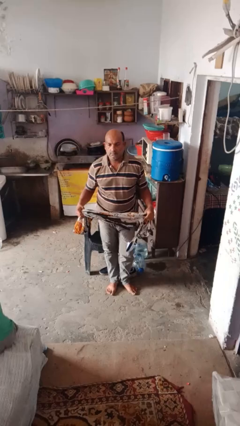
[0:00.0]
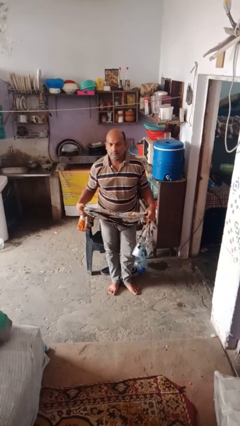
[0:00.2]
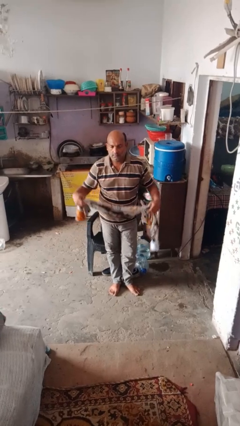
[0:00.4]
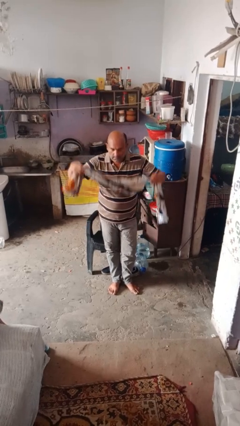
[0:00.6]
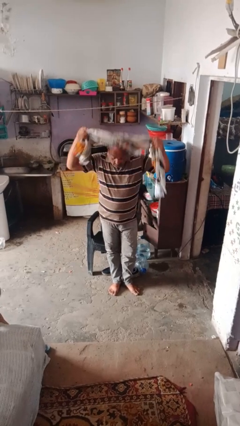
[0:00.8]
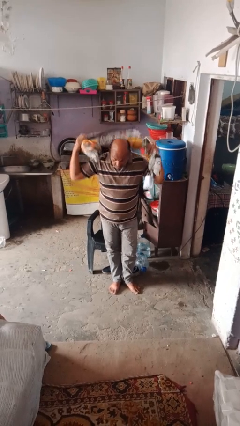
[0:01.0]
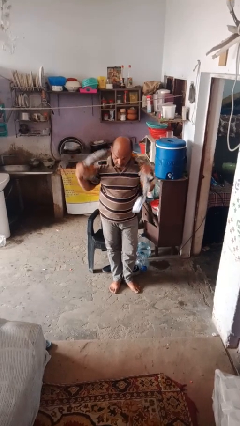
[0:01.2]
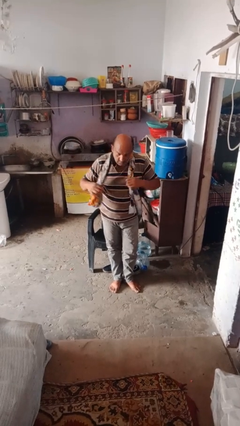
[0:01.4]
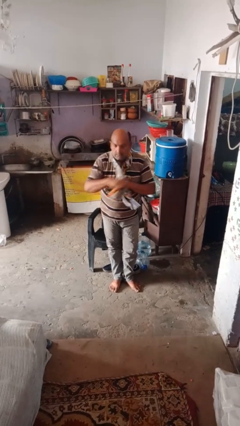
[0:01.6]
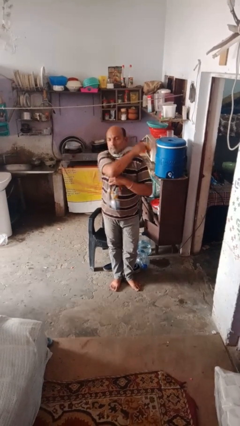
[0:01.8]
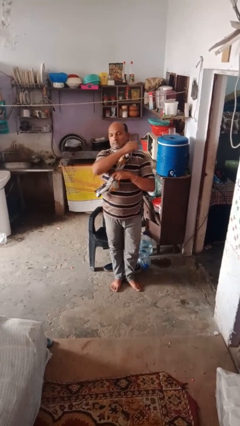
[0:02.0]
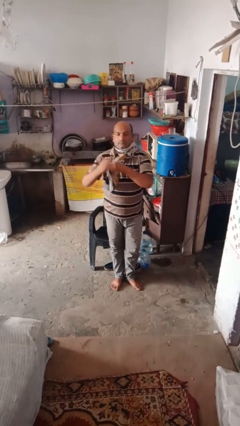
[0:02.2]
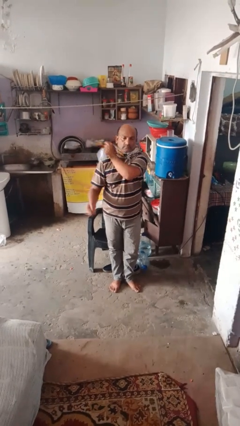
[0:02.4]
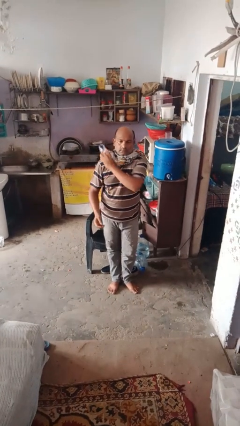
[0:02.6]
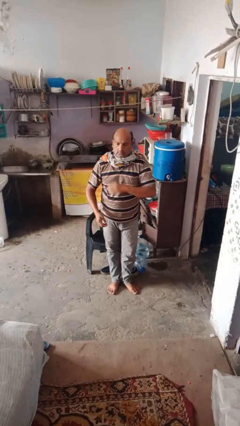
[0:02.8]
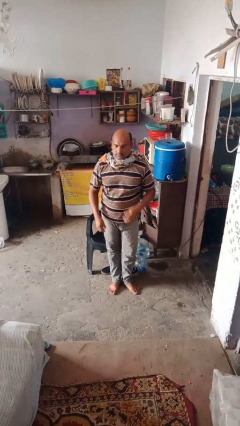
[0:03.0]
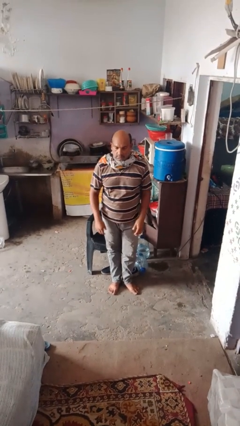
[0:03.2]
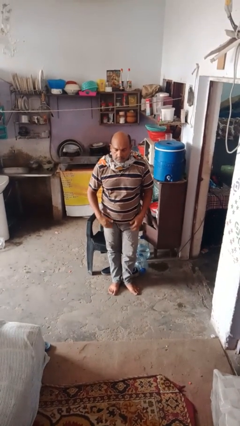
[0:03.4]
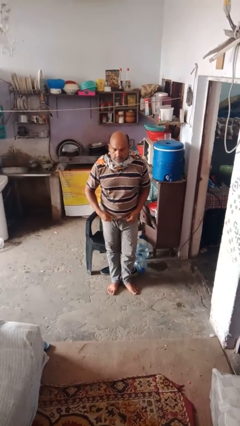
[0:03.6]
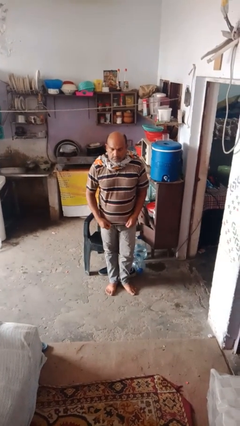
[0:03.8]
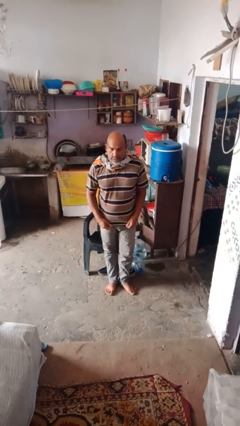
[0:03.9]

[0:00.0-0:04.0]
person puts on scarf

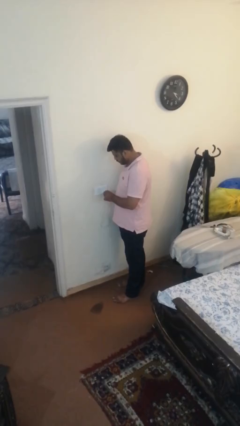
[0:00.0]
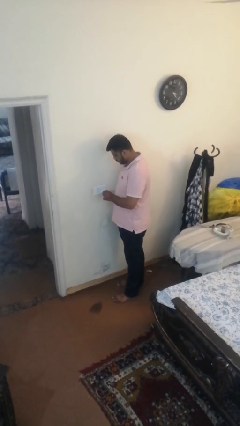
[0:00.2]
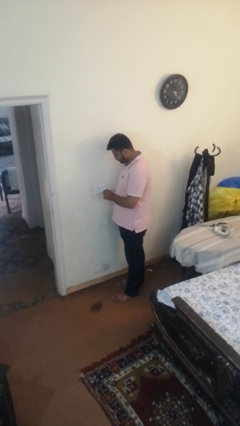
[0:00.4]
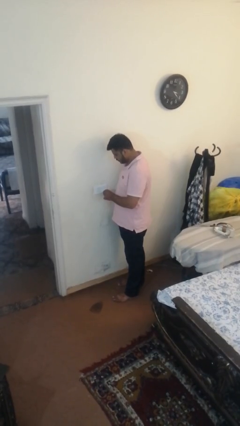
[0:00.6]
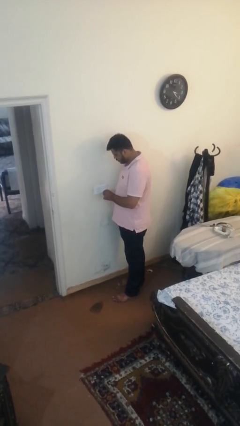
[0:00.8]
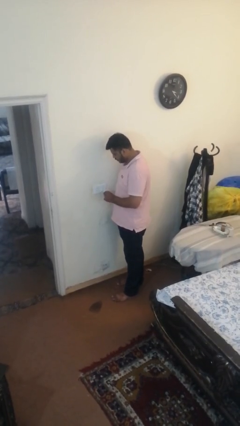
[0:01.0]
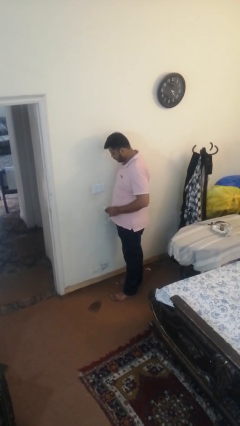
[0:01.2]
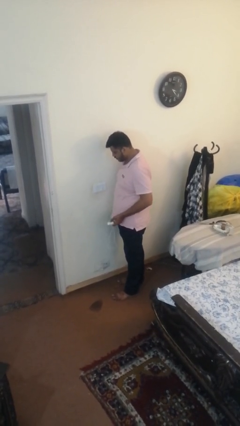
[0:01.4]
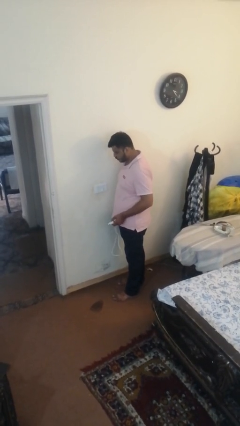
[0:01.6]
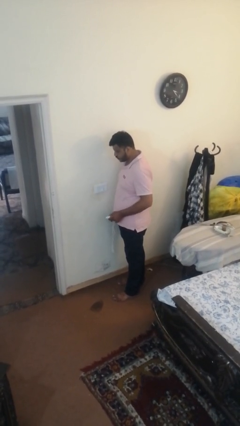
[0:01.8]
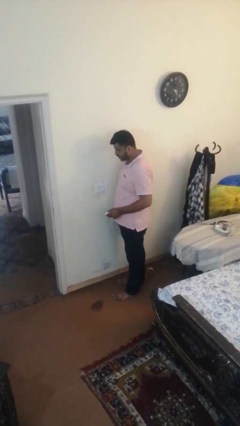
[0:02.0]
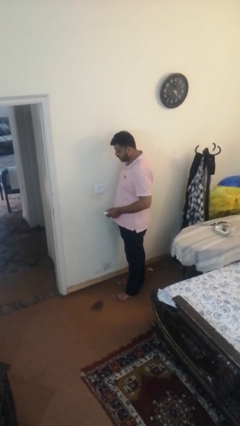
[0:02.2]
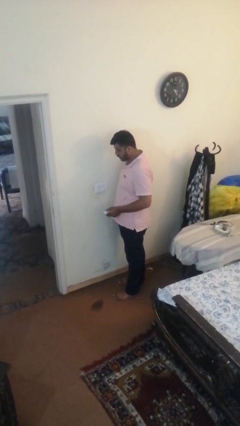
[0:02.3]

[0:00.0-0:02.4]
person unplugs from electrical socket

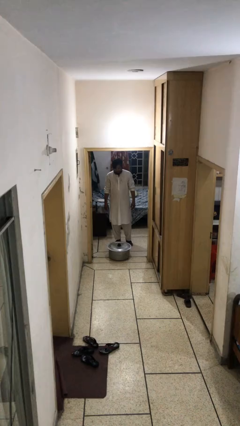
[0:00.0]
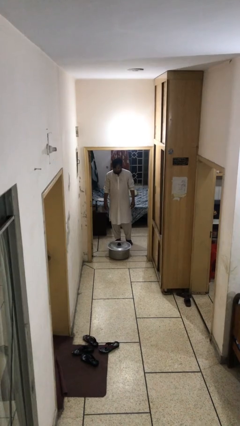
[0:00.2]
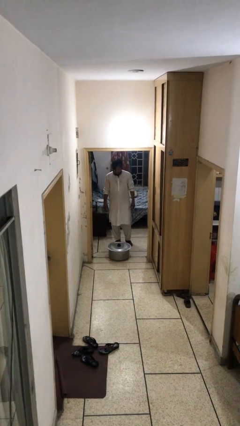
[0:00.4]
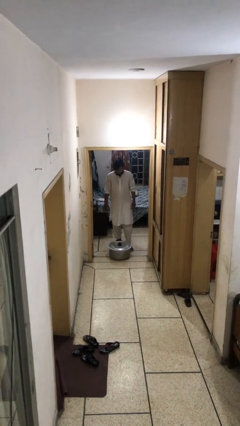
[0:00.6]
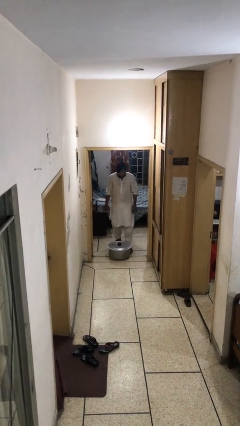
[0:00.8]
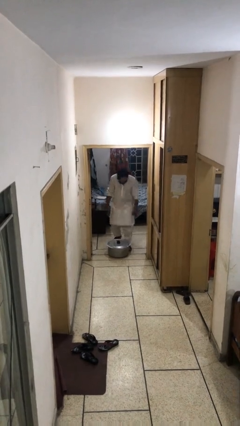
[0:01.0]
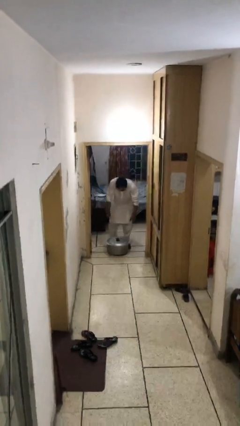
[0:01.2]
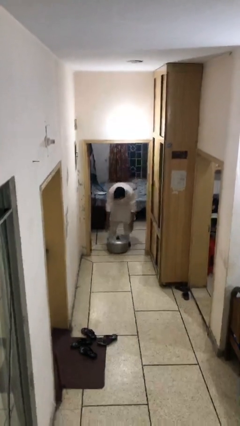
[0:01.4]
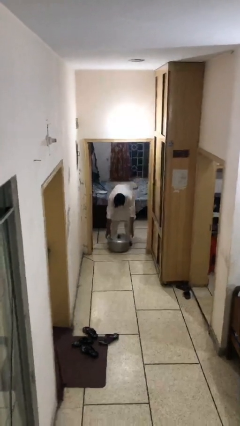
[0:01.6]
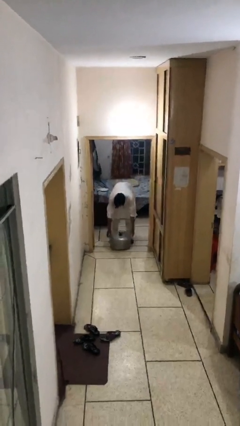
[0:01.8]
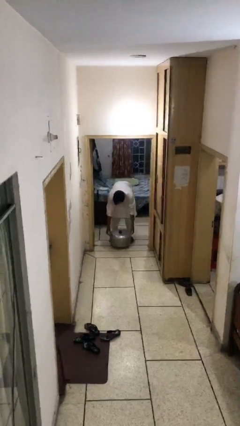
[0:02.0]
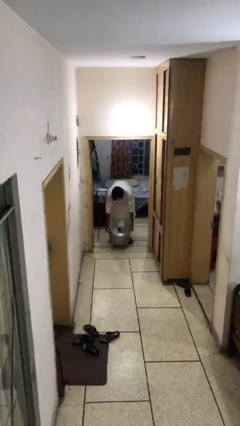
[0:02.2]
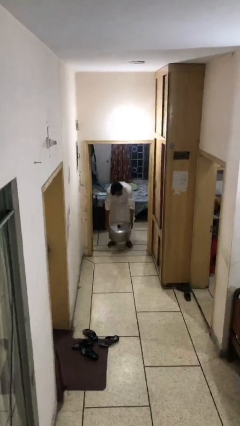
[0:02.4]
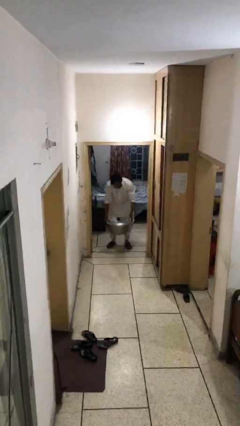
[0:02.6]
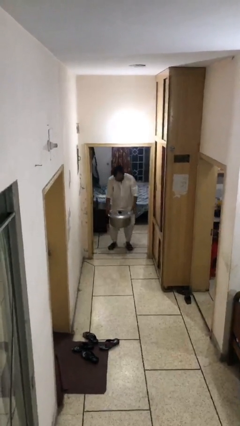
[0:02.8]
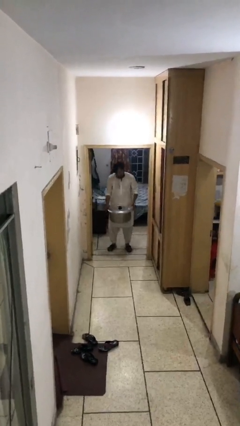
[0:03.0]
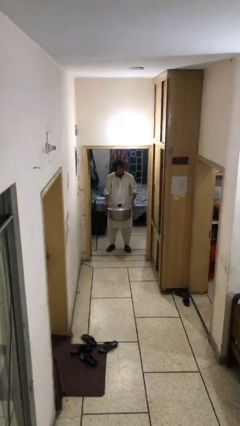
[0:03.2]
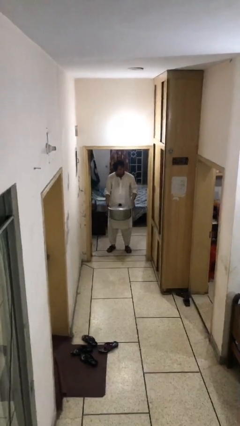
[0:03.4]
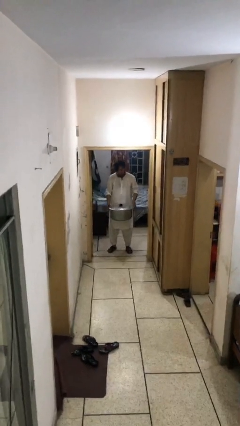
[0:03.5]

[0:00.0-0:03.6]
person picks up object from floor

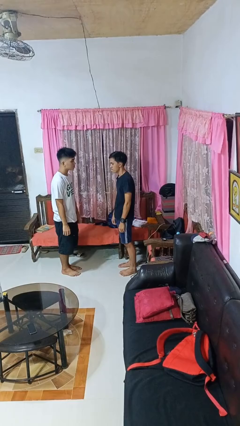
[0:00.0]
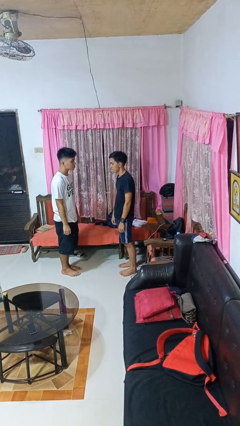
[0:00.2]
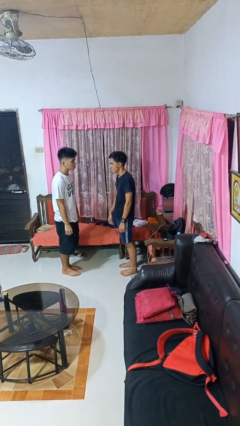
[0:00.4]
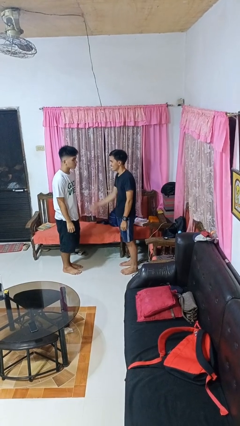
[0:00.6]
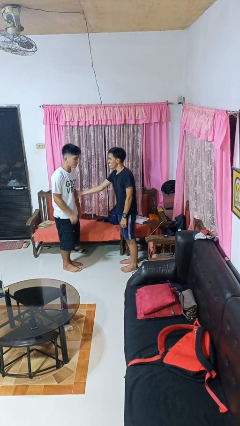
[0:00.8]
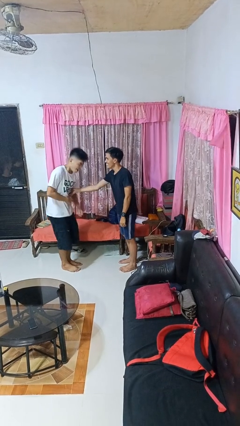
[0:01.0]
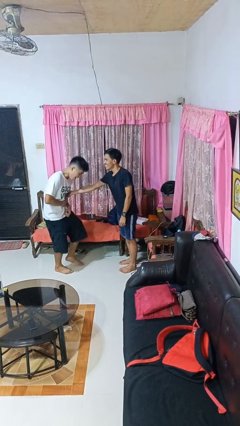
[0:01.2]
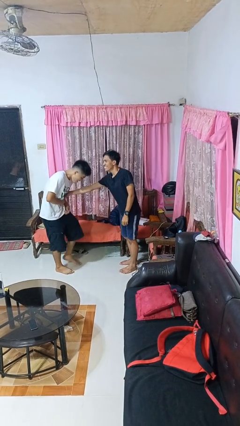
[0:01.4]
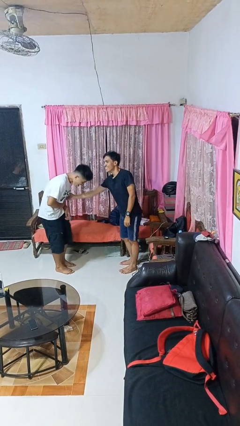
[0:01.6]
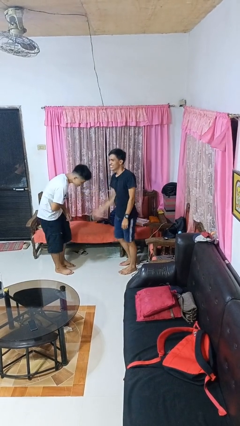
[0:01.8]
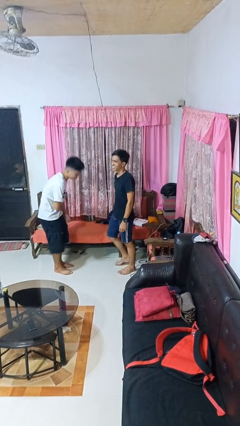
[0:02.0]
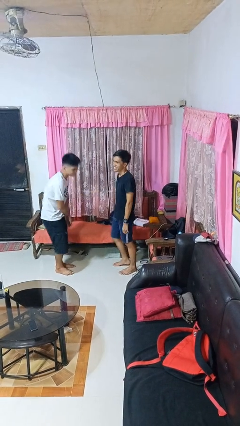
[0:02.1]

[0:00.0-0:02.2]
person tickles person

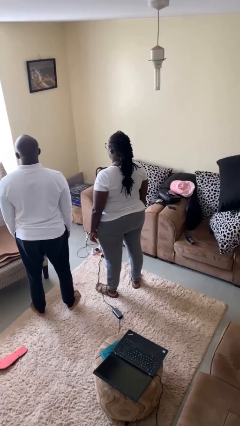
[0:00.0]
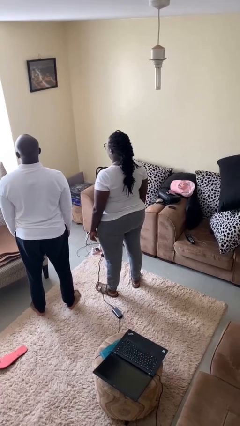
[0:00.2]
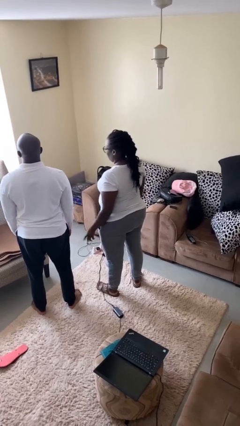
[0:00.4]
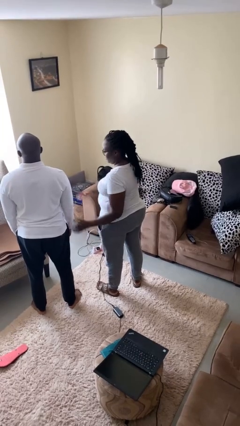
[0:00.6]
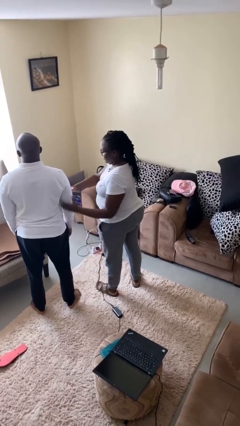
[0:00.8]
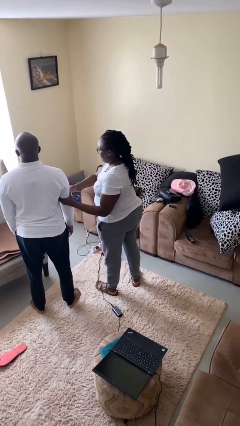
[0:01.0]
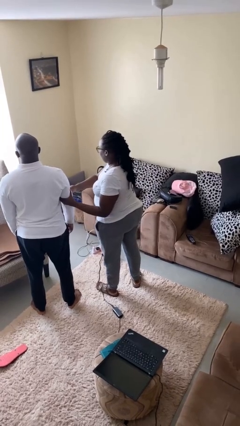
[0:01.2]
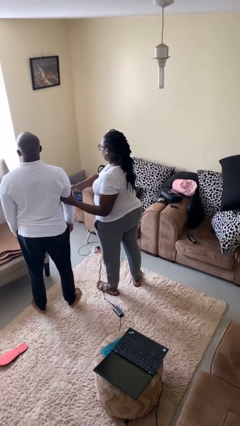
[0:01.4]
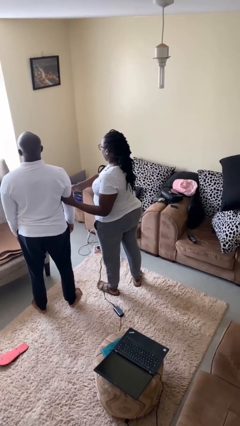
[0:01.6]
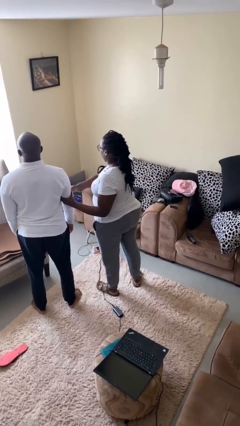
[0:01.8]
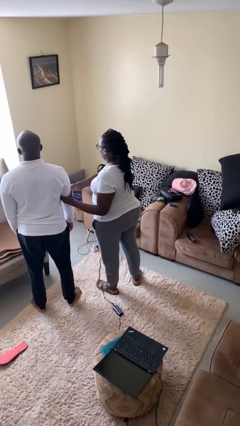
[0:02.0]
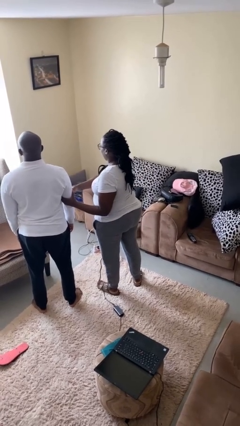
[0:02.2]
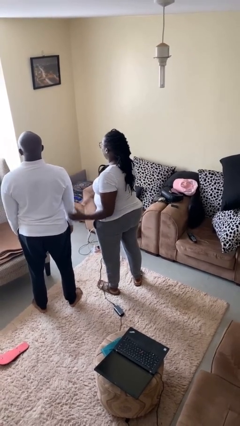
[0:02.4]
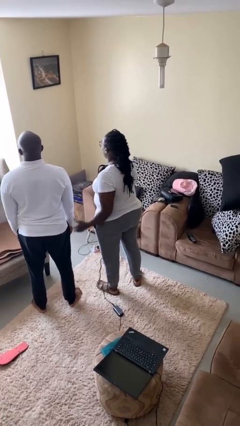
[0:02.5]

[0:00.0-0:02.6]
person grabs person by bicep

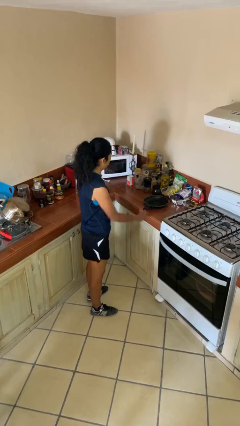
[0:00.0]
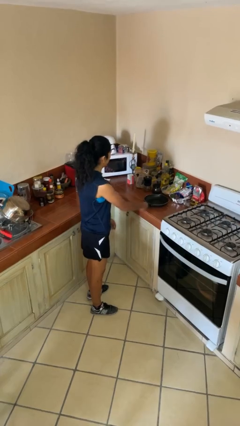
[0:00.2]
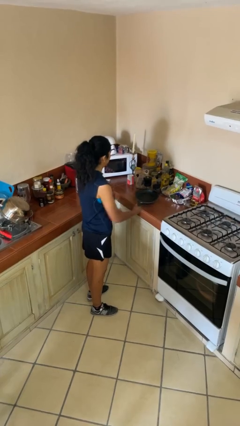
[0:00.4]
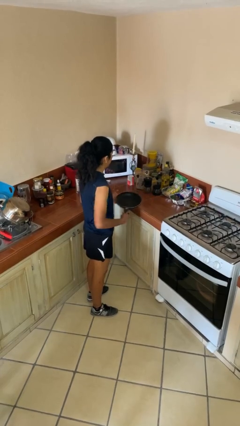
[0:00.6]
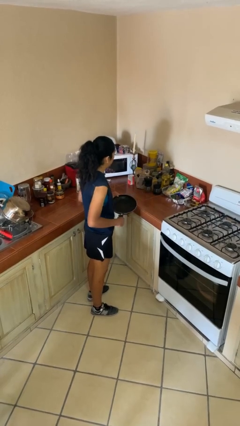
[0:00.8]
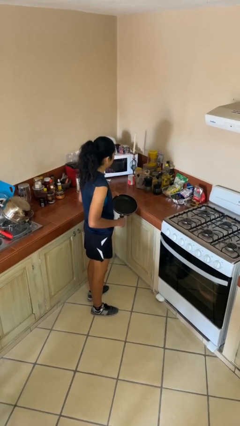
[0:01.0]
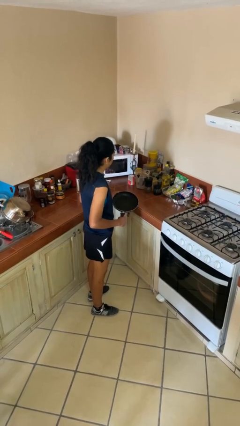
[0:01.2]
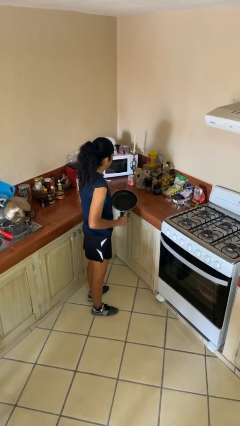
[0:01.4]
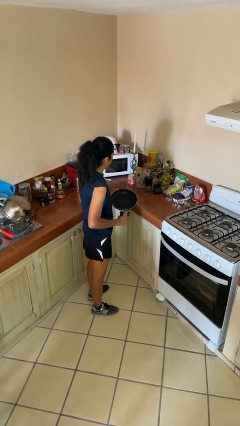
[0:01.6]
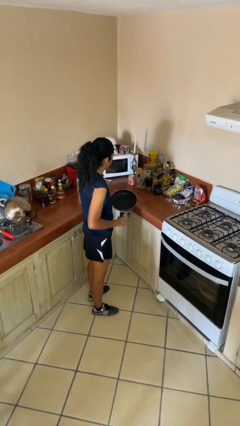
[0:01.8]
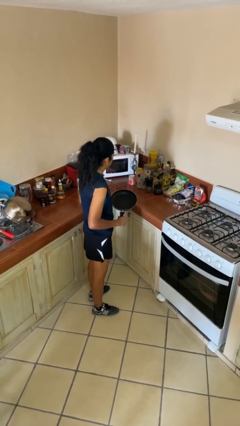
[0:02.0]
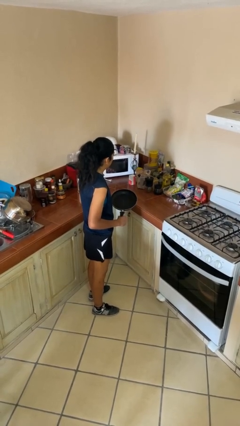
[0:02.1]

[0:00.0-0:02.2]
person picks up object from countertop

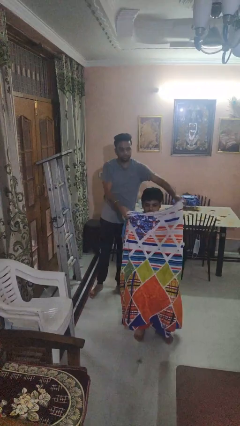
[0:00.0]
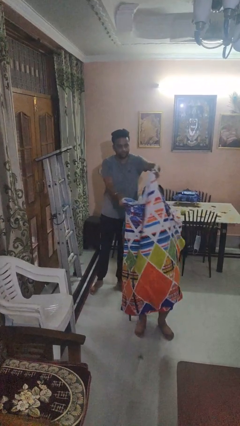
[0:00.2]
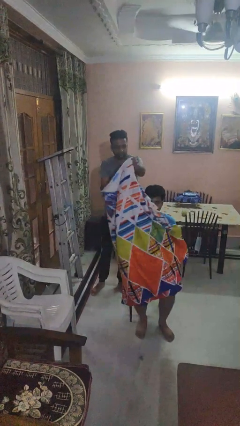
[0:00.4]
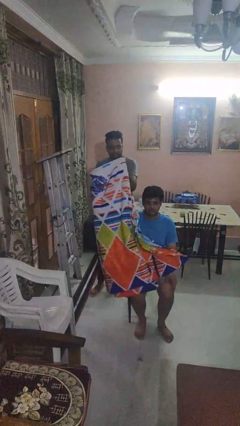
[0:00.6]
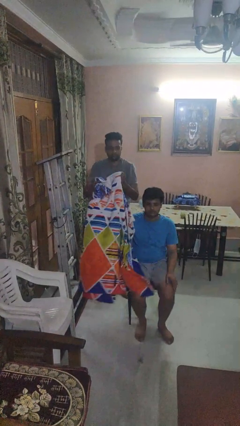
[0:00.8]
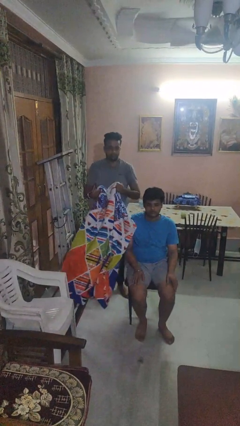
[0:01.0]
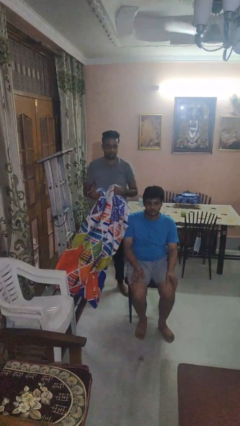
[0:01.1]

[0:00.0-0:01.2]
person uncovers friend with blanket
